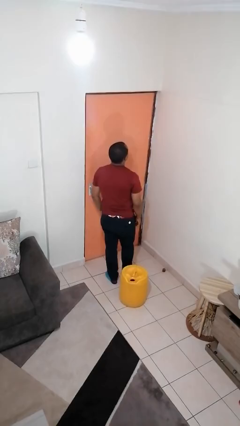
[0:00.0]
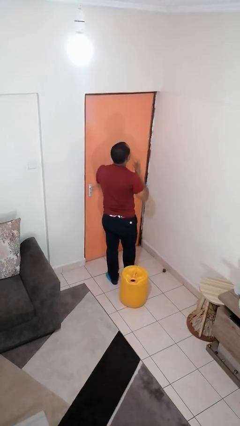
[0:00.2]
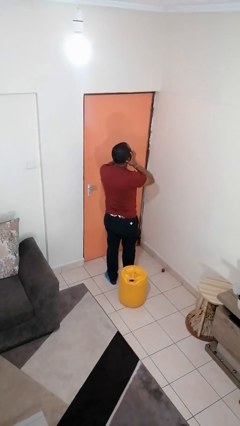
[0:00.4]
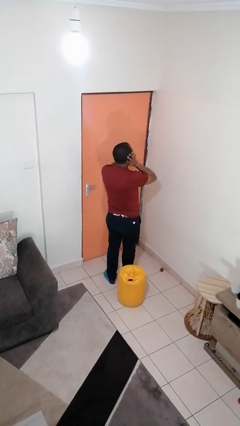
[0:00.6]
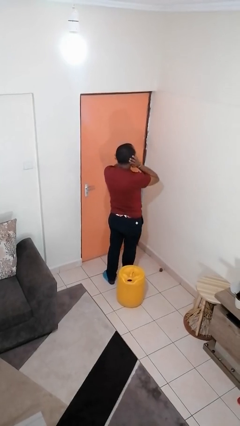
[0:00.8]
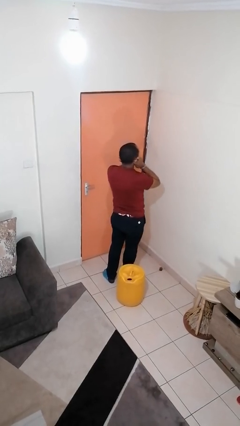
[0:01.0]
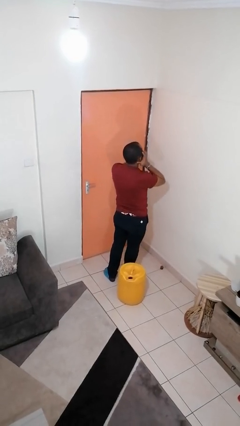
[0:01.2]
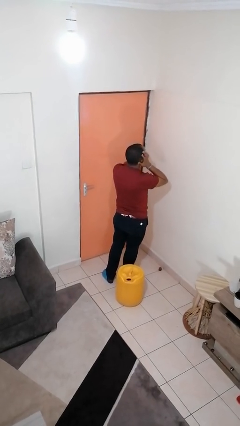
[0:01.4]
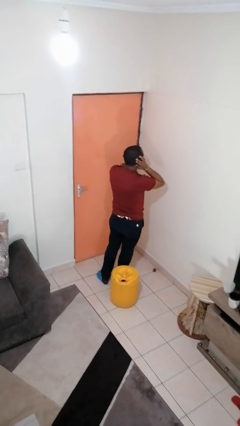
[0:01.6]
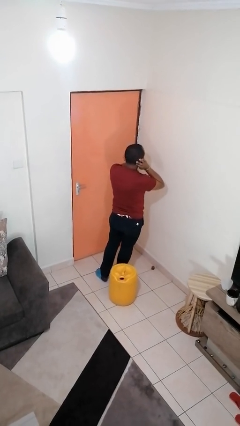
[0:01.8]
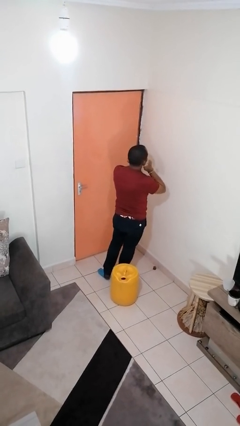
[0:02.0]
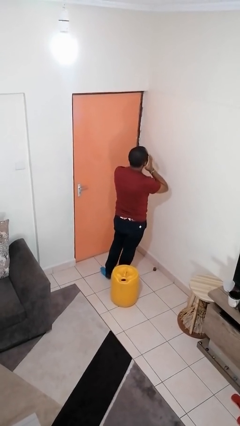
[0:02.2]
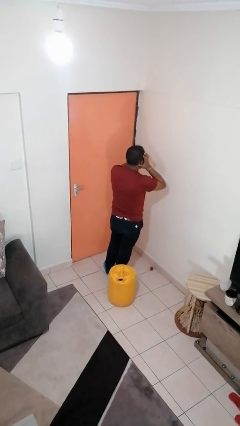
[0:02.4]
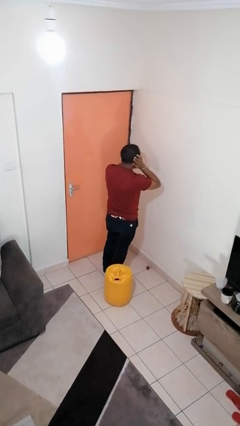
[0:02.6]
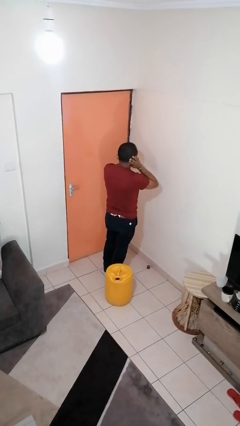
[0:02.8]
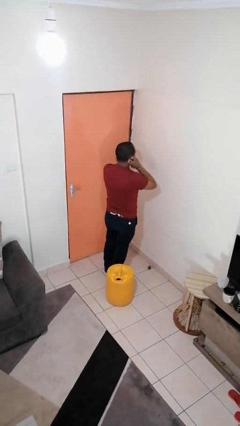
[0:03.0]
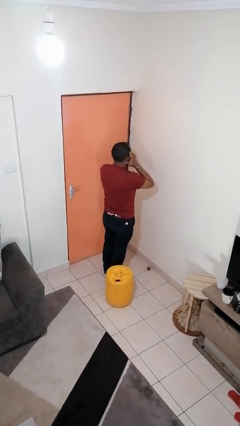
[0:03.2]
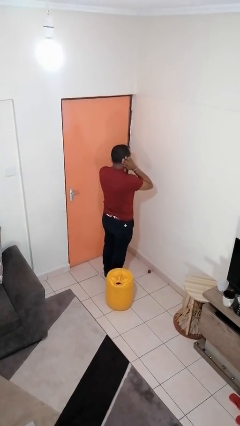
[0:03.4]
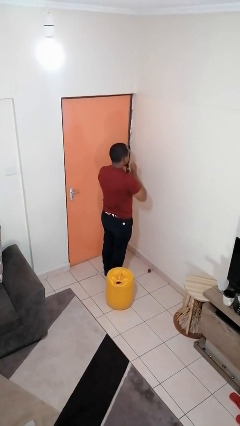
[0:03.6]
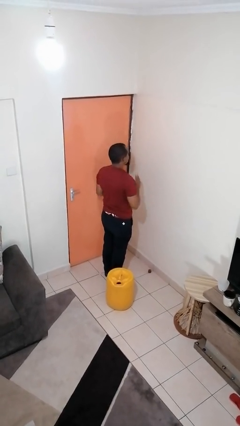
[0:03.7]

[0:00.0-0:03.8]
person strokes hair

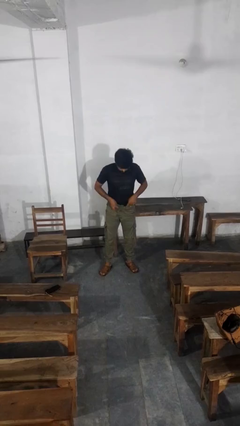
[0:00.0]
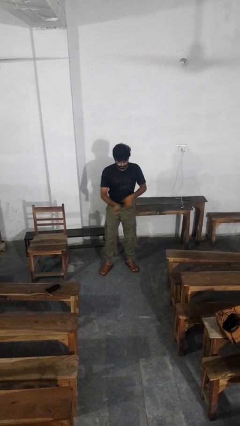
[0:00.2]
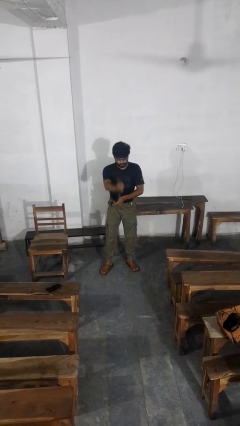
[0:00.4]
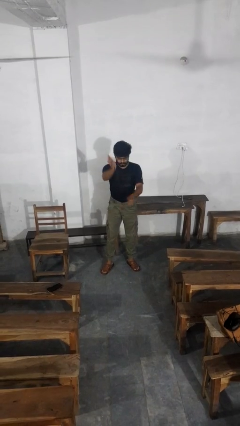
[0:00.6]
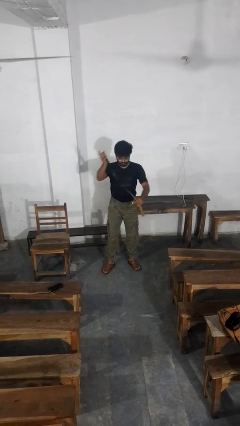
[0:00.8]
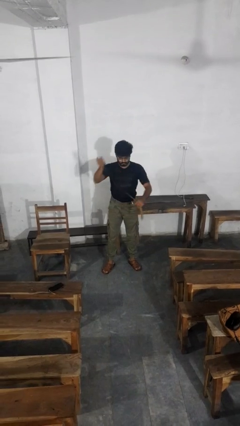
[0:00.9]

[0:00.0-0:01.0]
person takes off belt

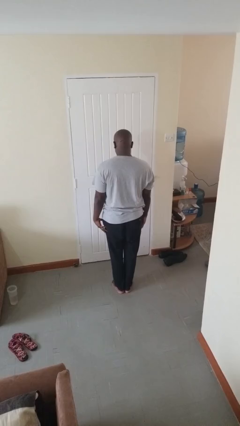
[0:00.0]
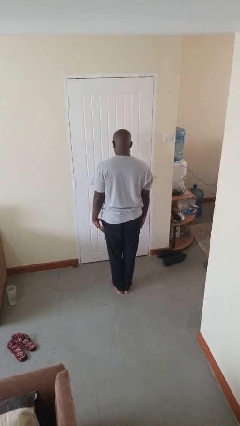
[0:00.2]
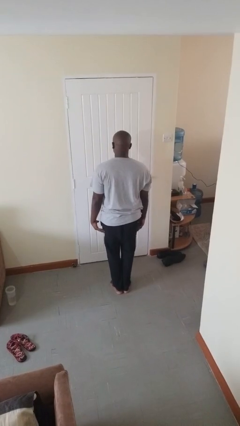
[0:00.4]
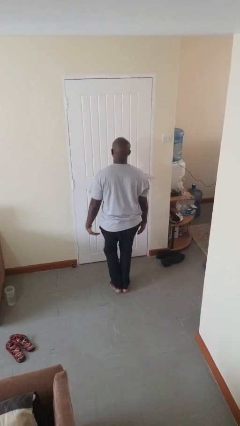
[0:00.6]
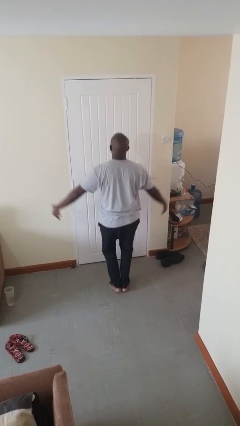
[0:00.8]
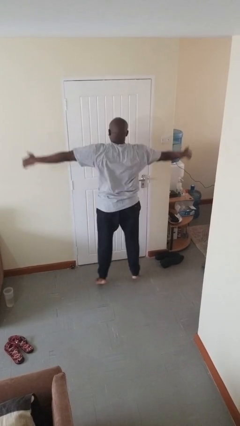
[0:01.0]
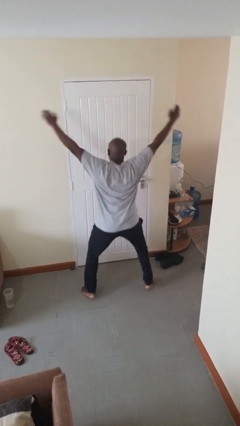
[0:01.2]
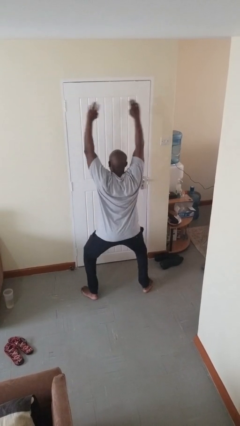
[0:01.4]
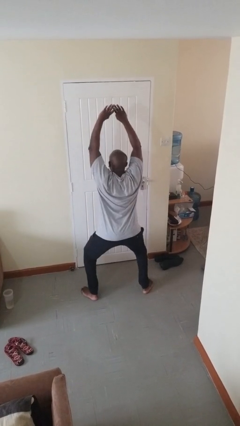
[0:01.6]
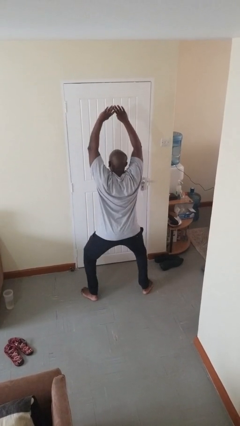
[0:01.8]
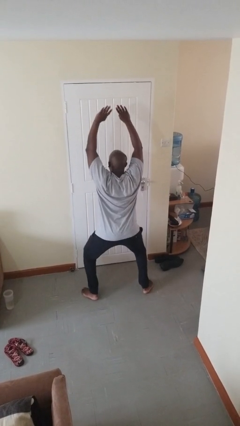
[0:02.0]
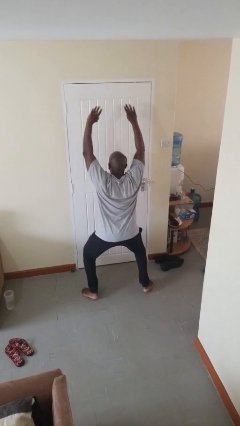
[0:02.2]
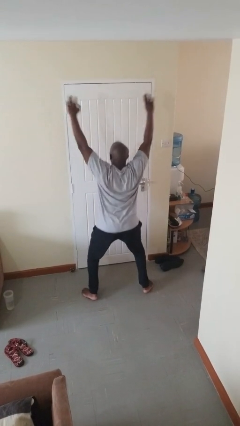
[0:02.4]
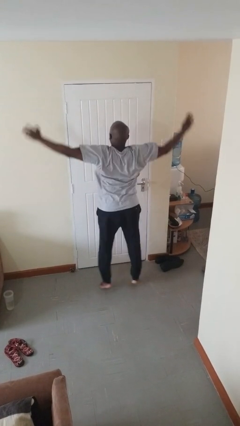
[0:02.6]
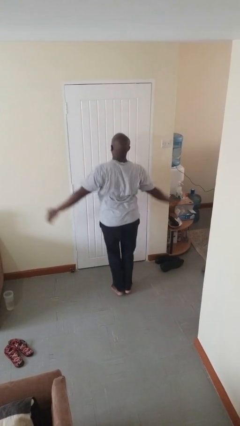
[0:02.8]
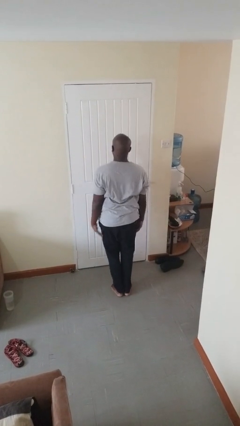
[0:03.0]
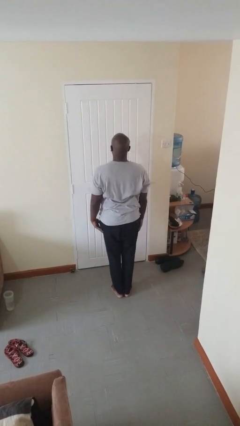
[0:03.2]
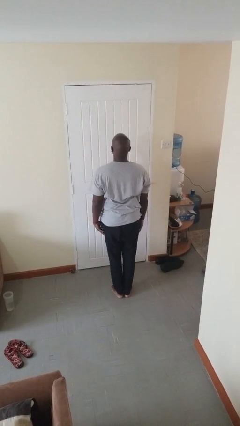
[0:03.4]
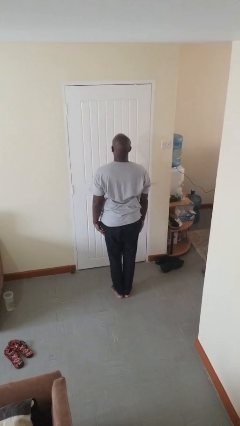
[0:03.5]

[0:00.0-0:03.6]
person exercises with jumping jacks

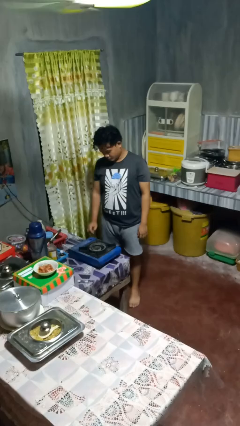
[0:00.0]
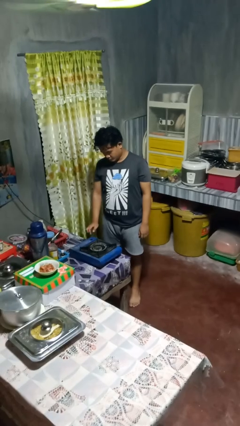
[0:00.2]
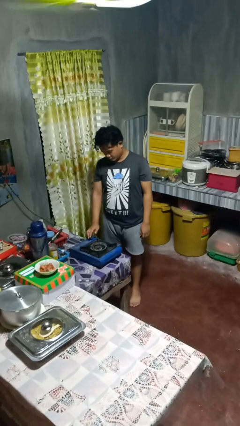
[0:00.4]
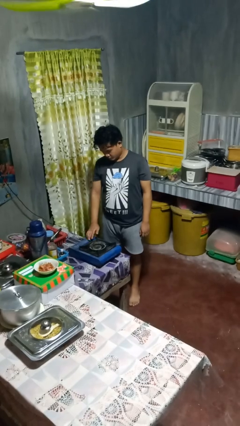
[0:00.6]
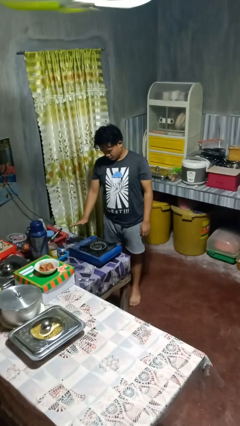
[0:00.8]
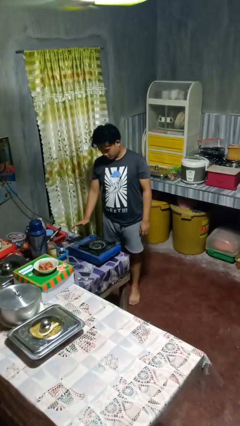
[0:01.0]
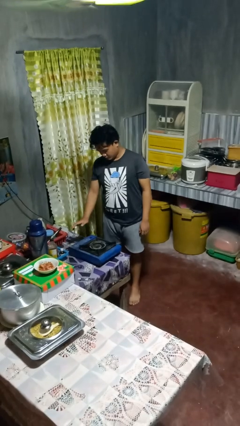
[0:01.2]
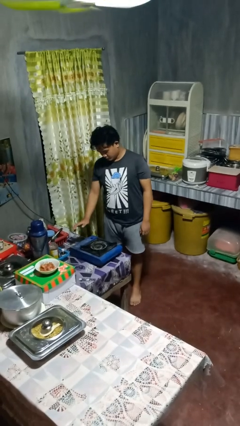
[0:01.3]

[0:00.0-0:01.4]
person burns hand

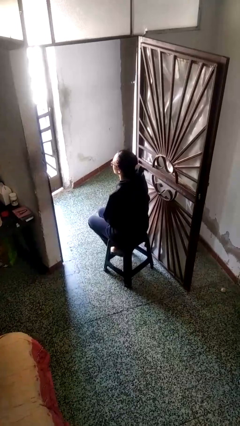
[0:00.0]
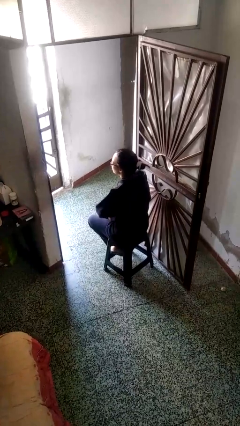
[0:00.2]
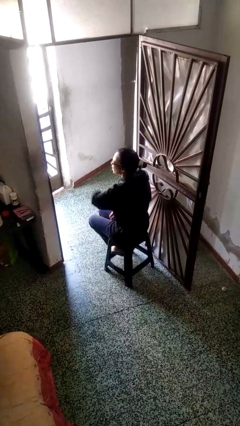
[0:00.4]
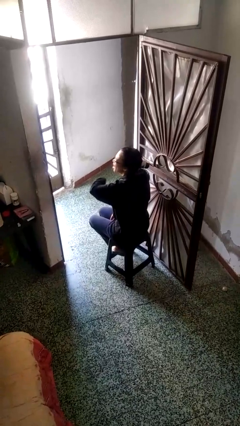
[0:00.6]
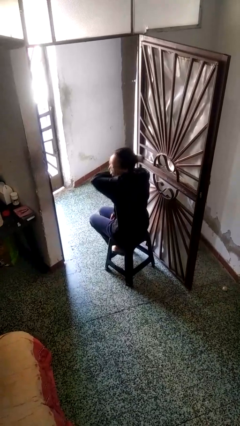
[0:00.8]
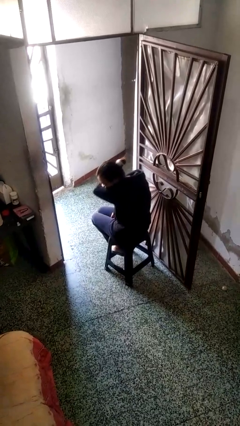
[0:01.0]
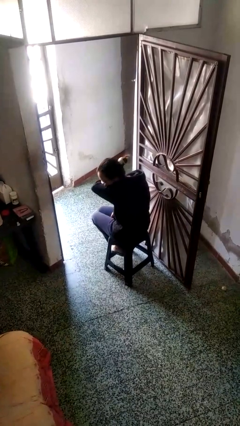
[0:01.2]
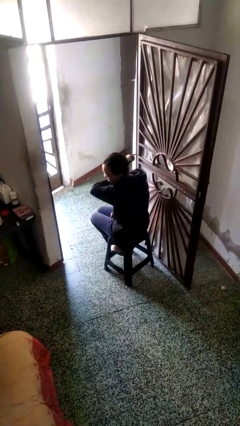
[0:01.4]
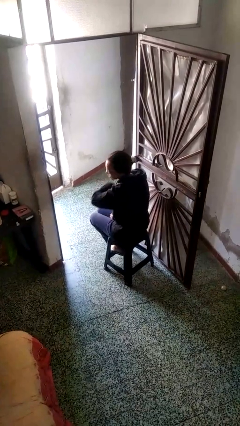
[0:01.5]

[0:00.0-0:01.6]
person sneezes into arm

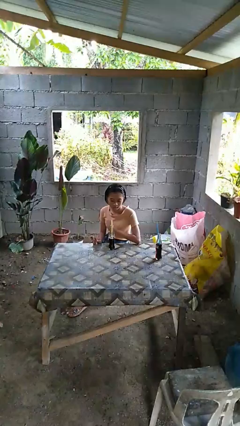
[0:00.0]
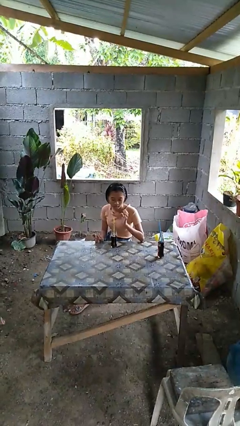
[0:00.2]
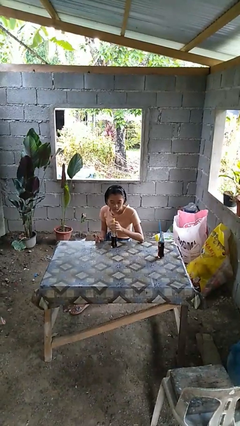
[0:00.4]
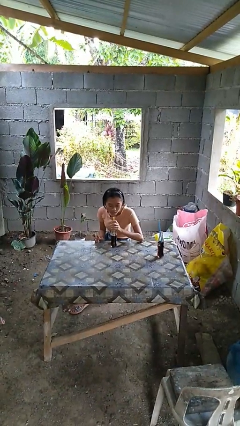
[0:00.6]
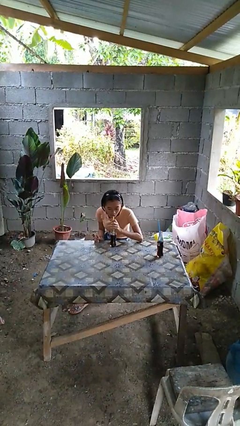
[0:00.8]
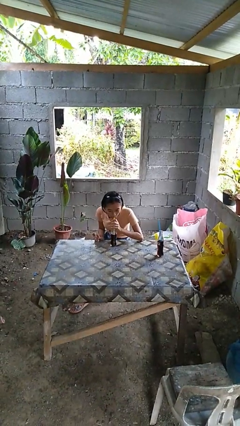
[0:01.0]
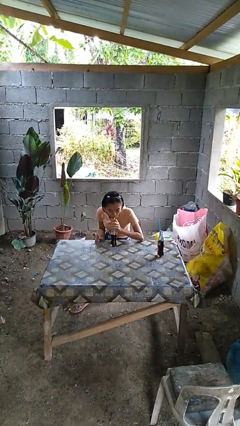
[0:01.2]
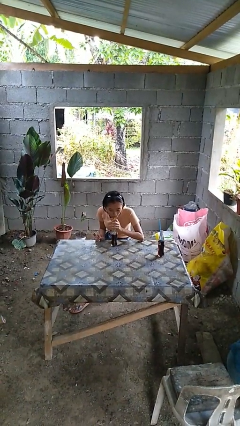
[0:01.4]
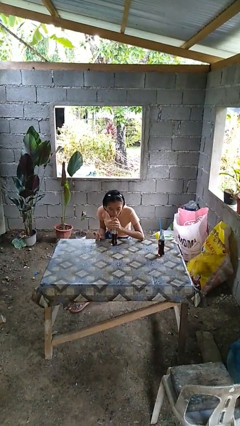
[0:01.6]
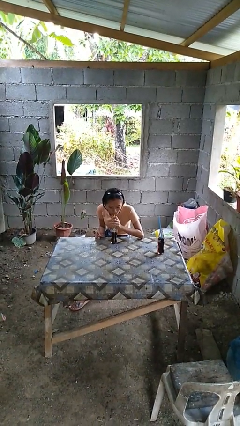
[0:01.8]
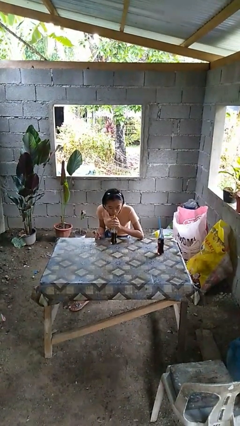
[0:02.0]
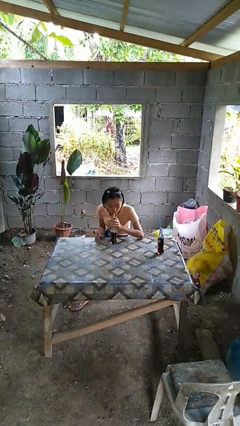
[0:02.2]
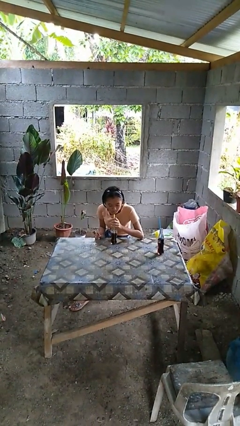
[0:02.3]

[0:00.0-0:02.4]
person drinks from straw

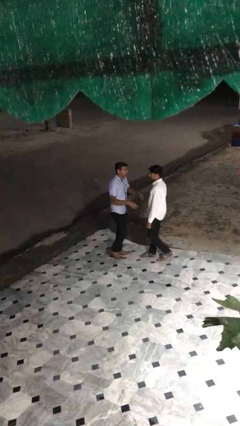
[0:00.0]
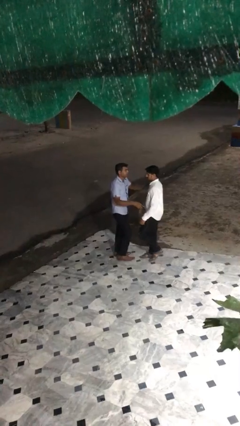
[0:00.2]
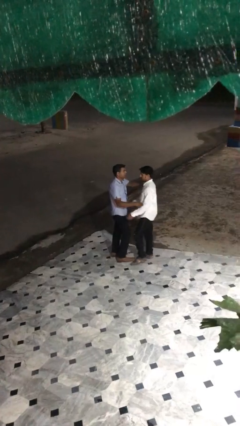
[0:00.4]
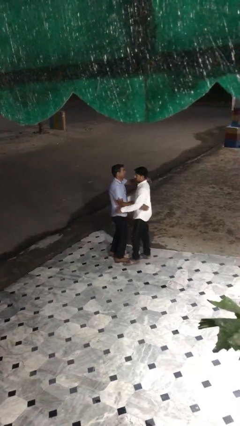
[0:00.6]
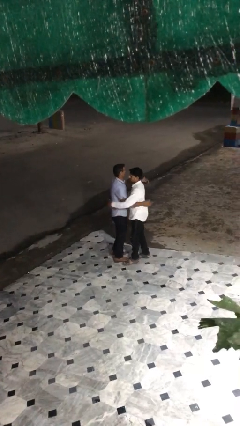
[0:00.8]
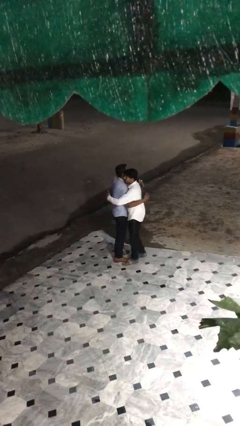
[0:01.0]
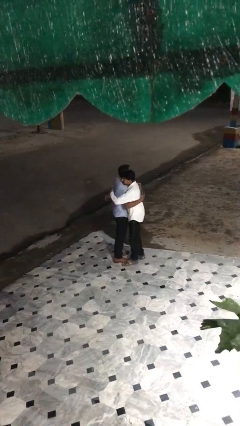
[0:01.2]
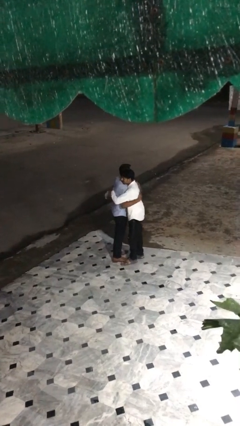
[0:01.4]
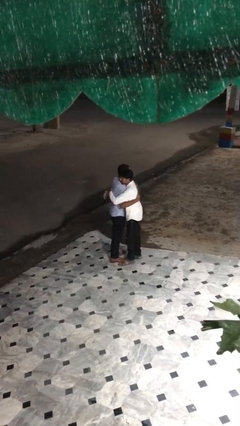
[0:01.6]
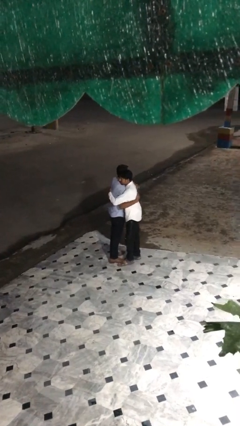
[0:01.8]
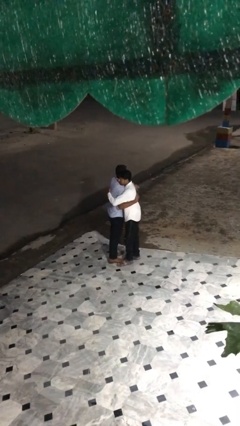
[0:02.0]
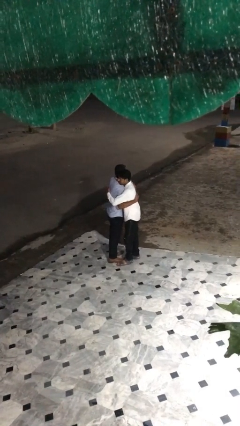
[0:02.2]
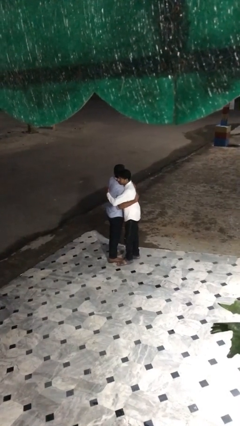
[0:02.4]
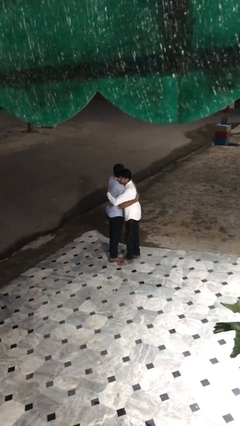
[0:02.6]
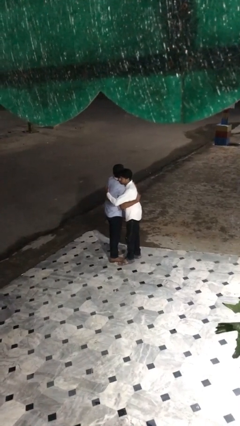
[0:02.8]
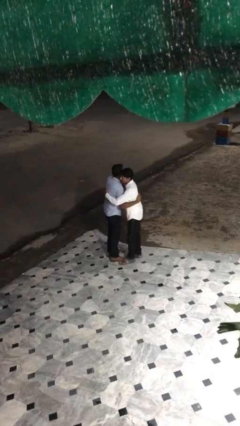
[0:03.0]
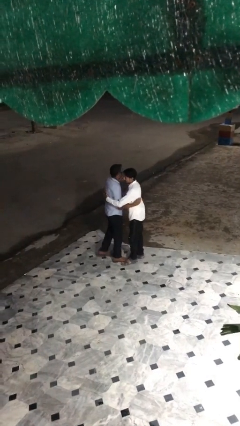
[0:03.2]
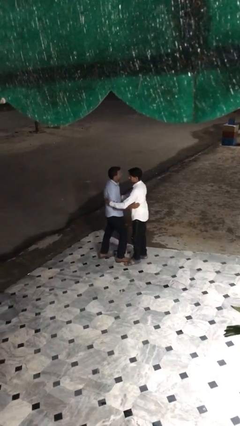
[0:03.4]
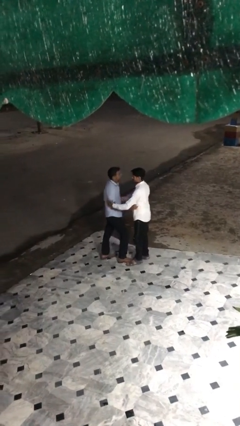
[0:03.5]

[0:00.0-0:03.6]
person embraces person
